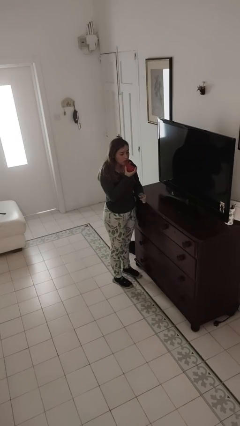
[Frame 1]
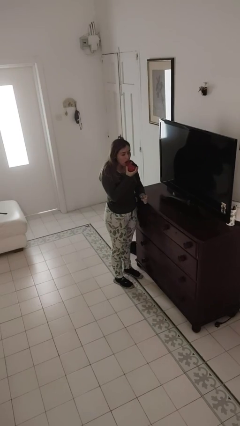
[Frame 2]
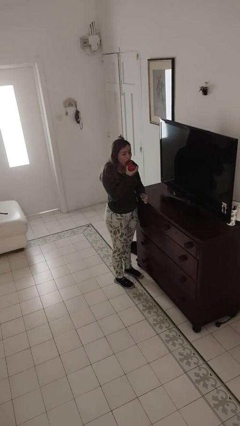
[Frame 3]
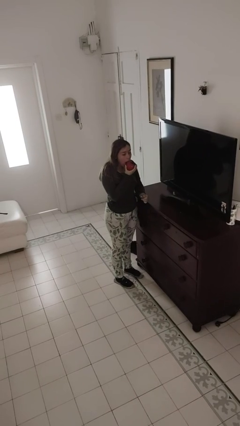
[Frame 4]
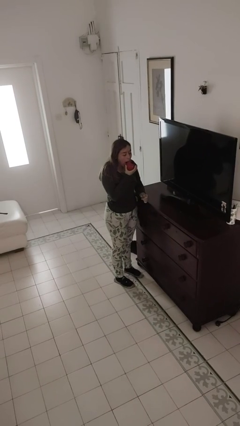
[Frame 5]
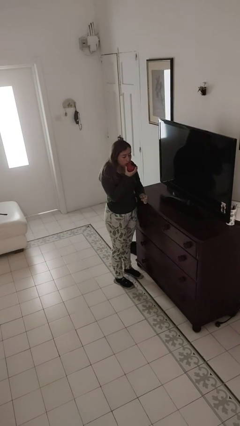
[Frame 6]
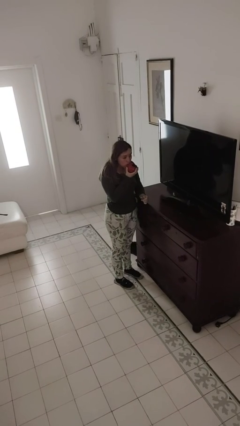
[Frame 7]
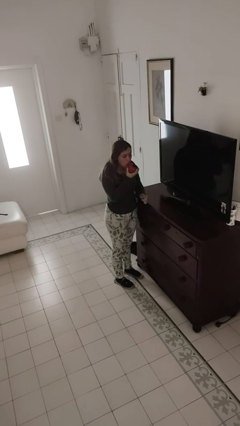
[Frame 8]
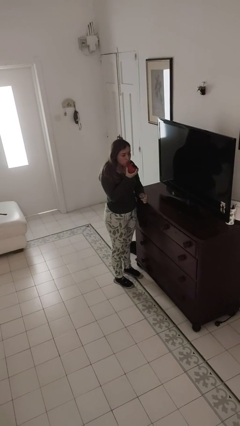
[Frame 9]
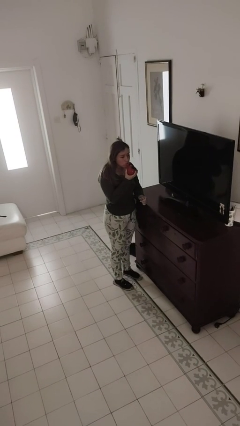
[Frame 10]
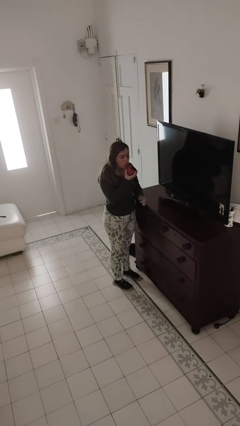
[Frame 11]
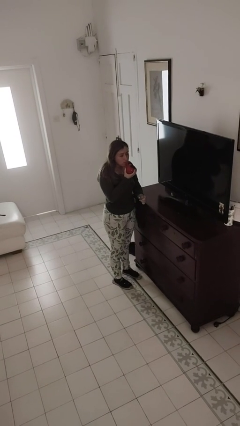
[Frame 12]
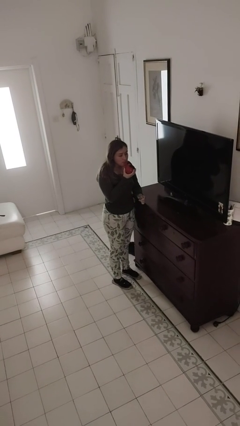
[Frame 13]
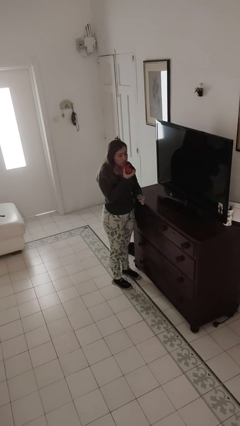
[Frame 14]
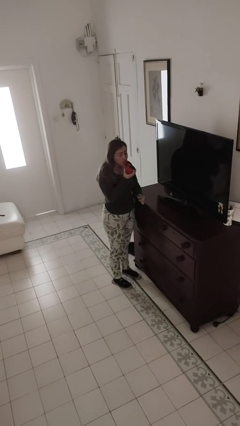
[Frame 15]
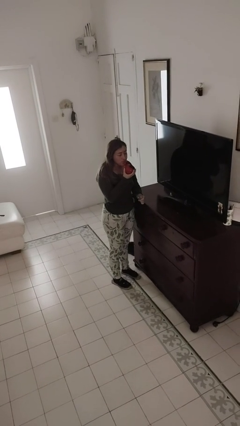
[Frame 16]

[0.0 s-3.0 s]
person eats apple

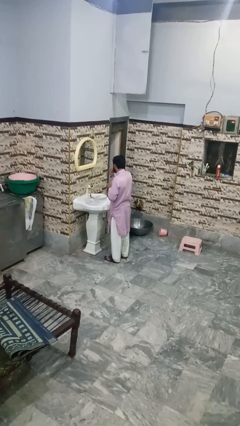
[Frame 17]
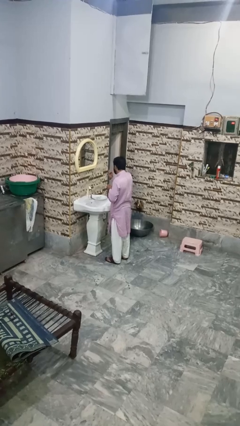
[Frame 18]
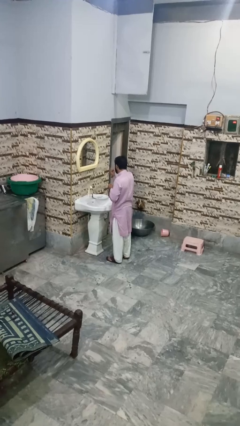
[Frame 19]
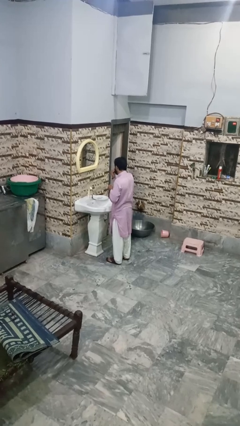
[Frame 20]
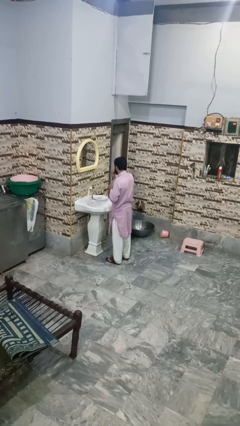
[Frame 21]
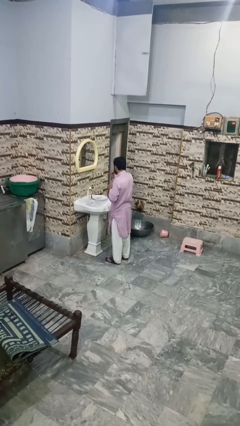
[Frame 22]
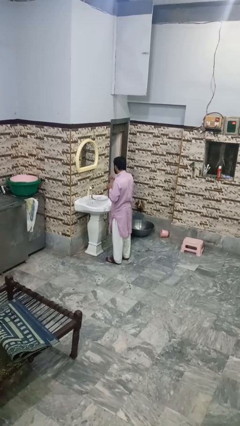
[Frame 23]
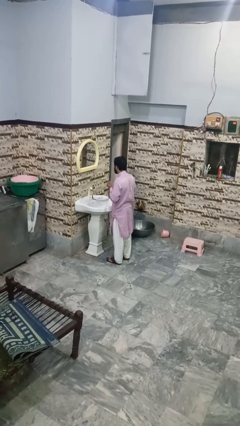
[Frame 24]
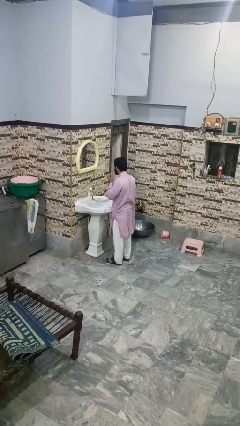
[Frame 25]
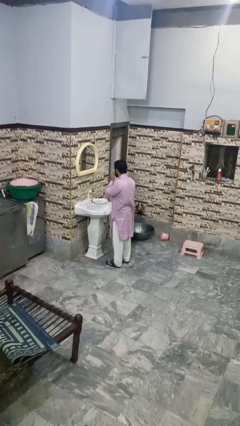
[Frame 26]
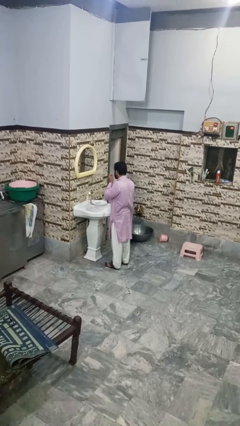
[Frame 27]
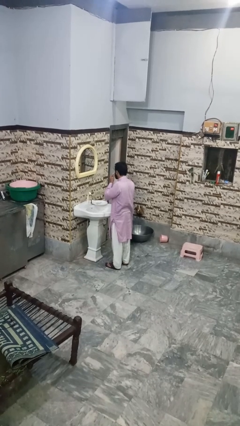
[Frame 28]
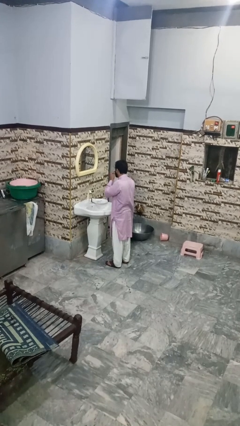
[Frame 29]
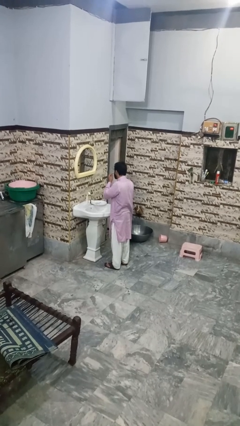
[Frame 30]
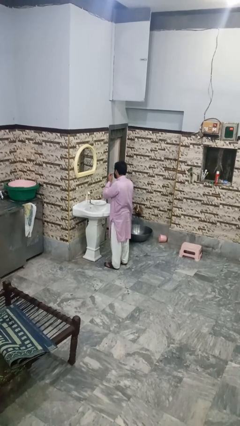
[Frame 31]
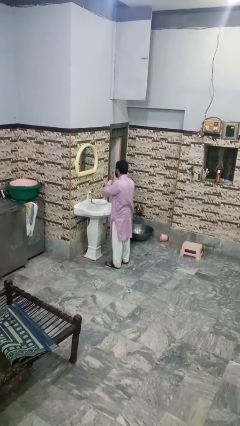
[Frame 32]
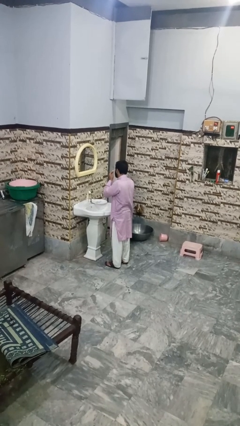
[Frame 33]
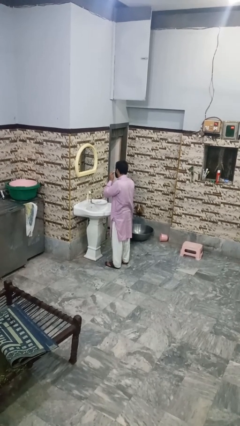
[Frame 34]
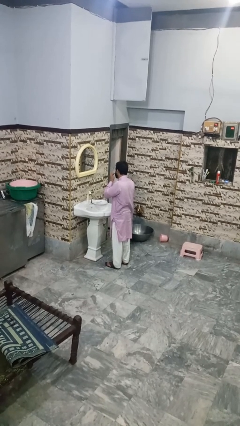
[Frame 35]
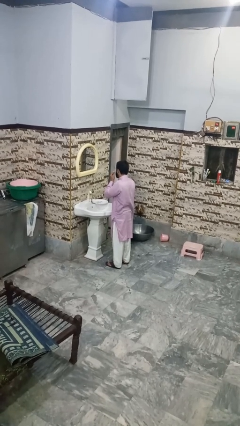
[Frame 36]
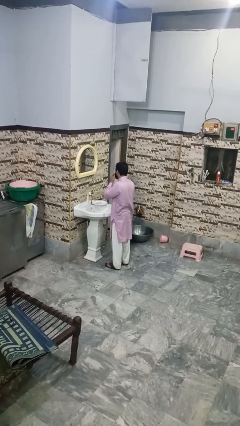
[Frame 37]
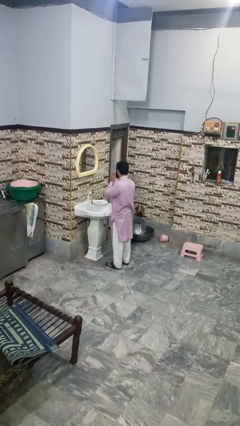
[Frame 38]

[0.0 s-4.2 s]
person applies shaving cream

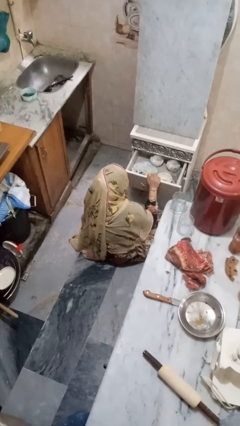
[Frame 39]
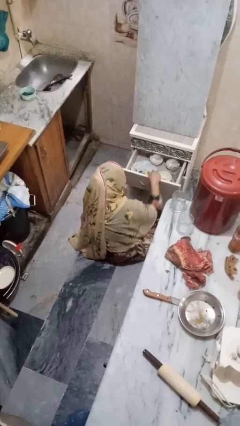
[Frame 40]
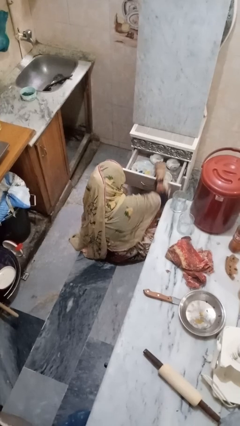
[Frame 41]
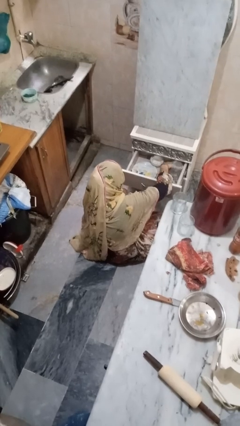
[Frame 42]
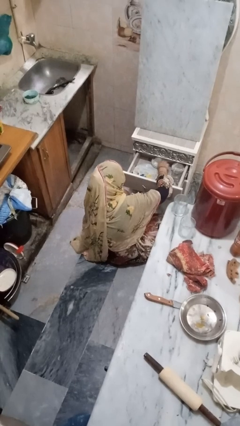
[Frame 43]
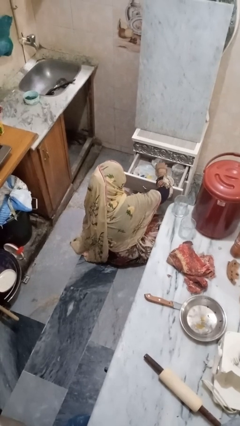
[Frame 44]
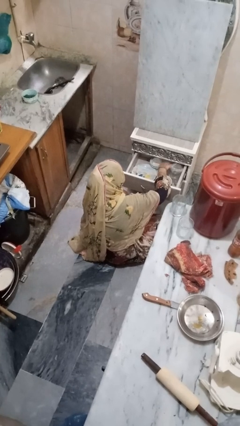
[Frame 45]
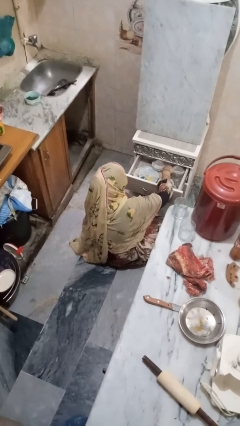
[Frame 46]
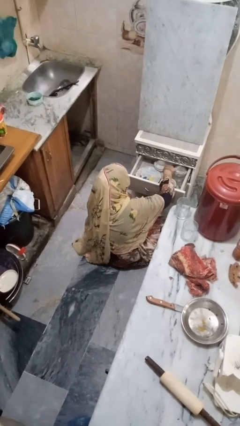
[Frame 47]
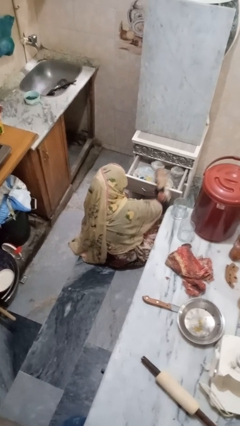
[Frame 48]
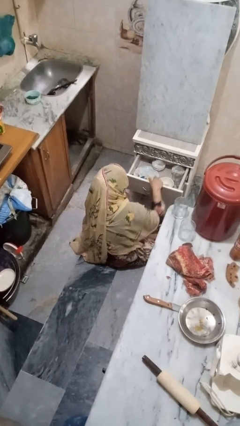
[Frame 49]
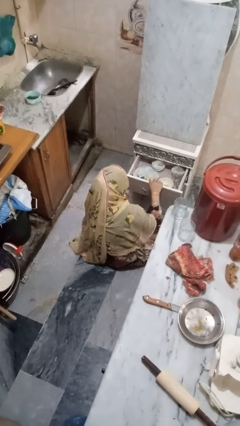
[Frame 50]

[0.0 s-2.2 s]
person searches in kitchen drawer

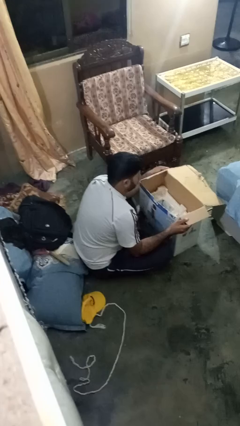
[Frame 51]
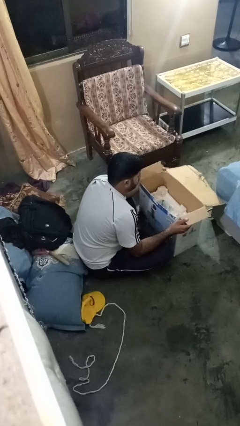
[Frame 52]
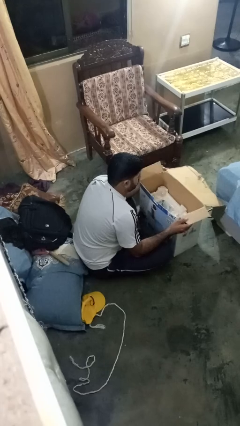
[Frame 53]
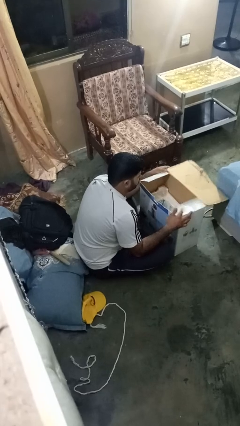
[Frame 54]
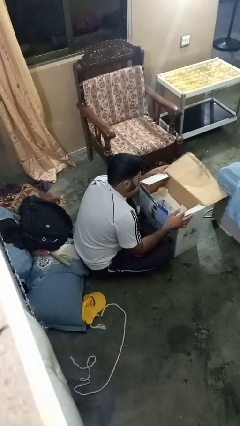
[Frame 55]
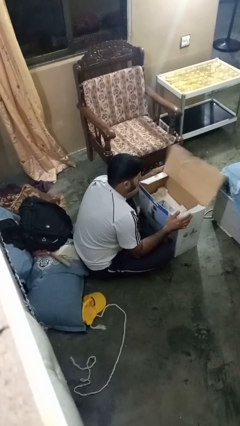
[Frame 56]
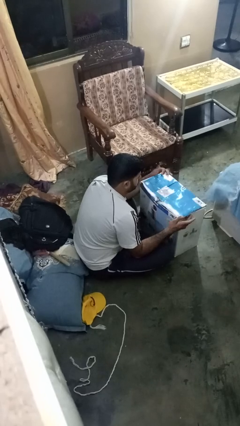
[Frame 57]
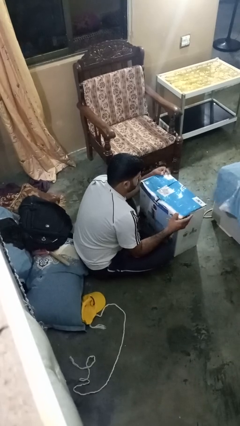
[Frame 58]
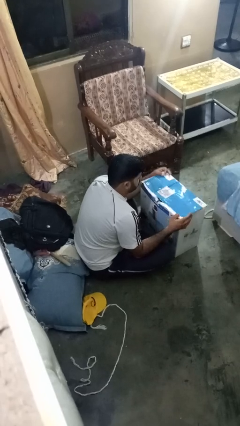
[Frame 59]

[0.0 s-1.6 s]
person closes box

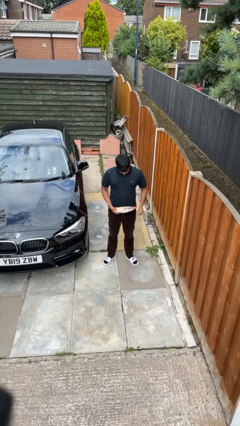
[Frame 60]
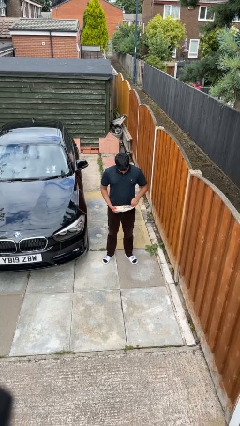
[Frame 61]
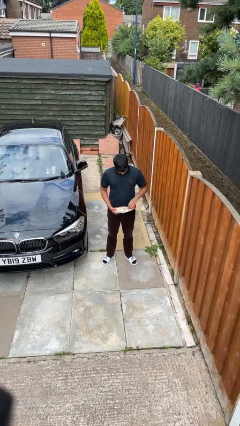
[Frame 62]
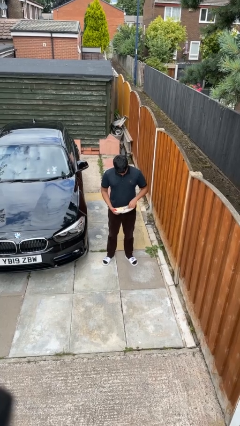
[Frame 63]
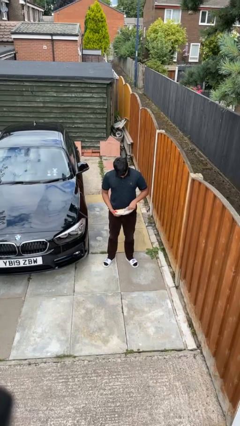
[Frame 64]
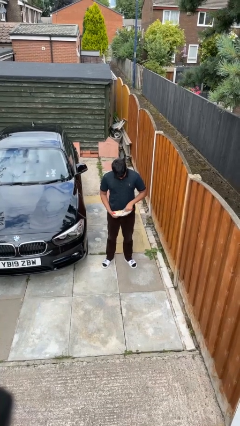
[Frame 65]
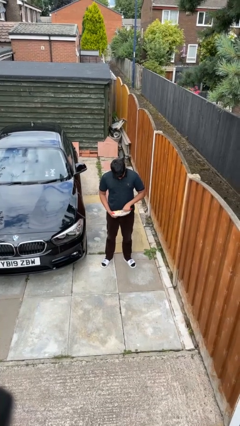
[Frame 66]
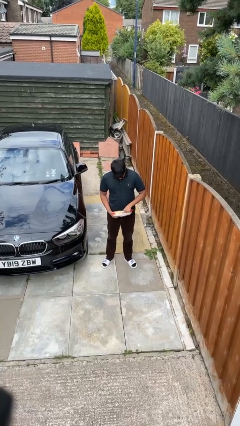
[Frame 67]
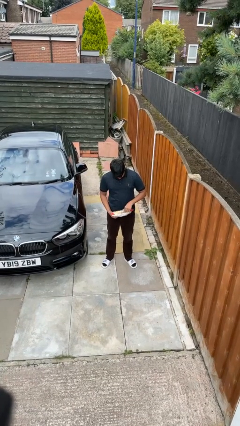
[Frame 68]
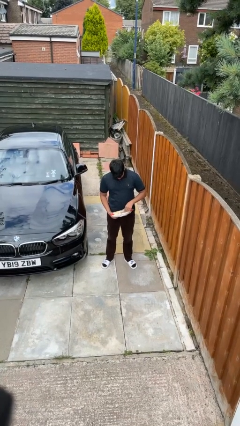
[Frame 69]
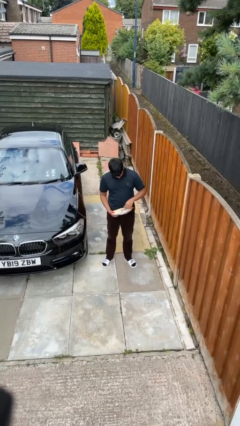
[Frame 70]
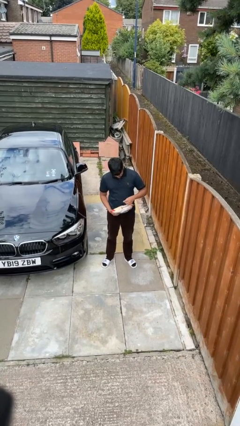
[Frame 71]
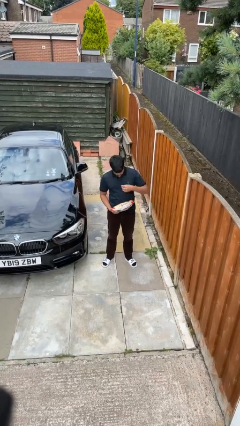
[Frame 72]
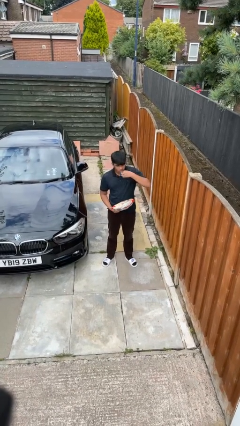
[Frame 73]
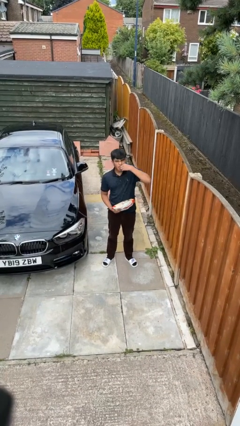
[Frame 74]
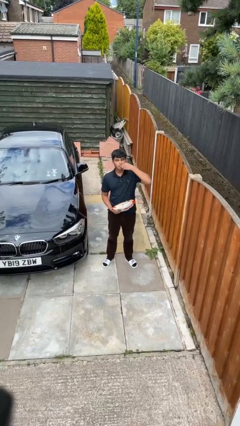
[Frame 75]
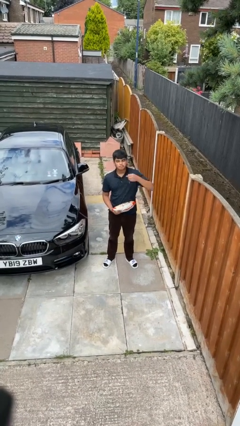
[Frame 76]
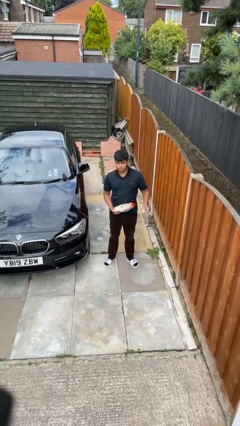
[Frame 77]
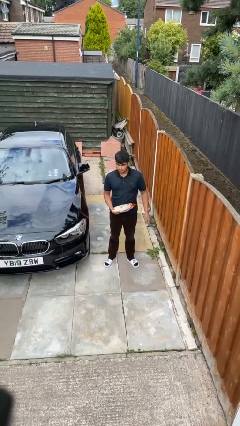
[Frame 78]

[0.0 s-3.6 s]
person eats snack from bag

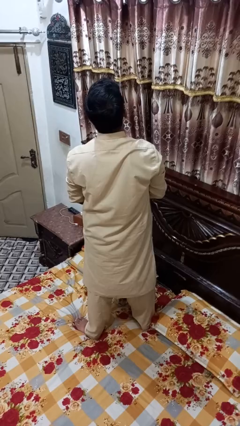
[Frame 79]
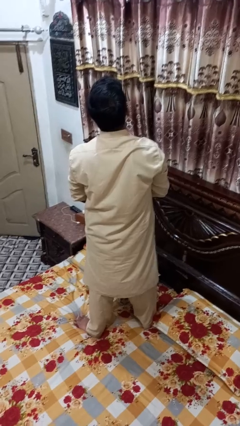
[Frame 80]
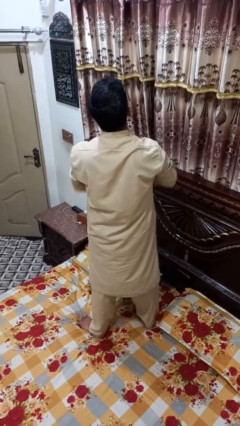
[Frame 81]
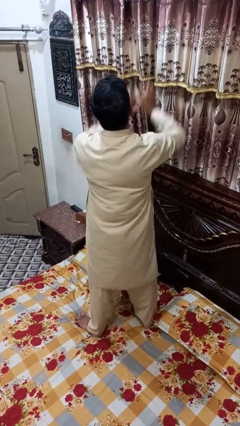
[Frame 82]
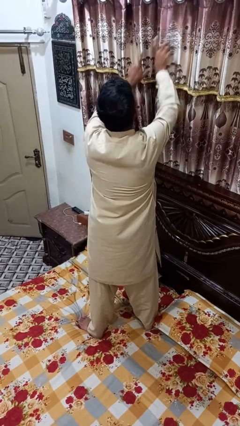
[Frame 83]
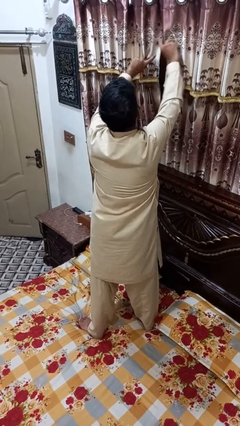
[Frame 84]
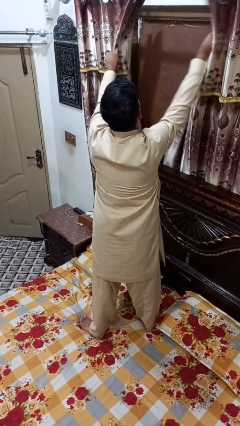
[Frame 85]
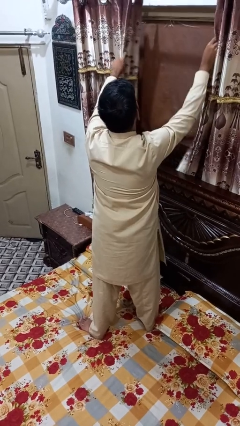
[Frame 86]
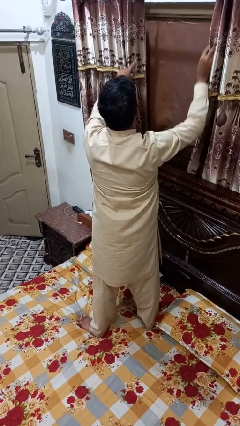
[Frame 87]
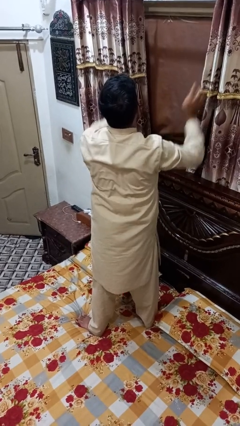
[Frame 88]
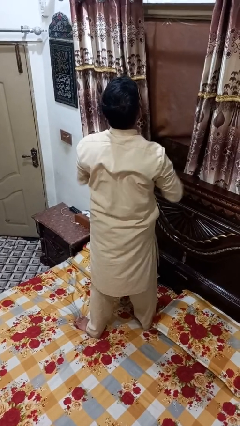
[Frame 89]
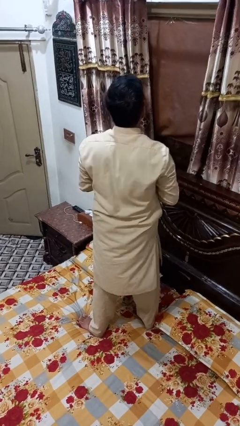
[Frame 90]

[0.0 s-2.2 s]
person opens curtains

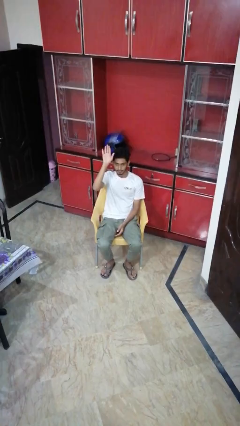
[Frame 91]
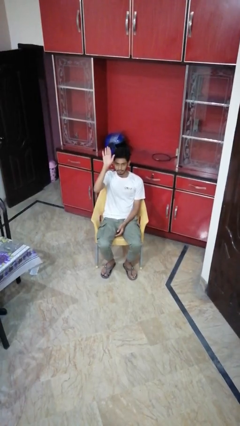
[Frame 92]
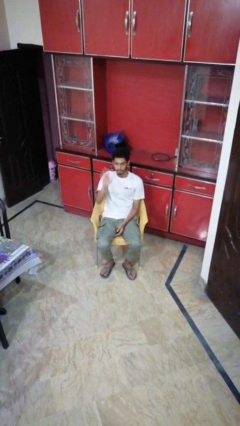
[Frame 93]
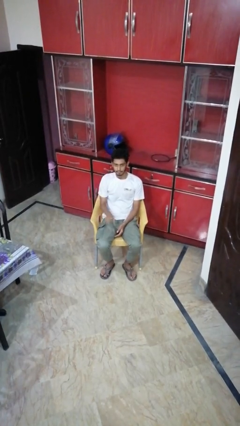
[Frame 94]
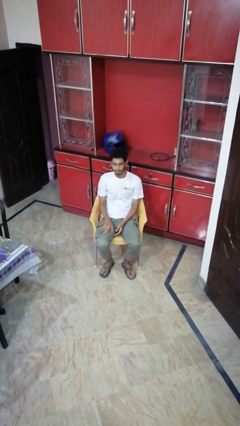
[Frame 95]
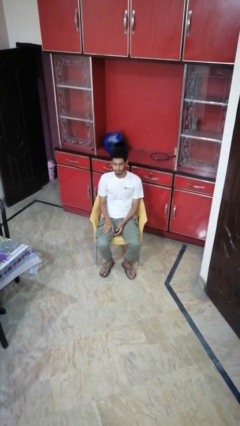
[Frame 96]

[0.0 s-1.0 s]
person gestures lower hand
